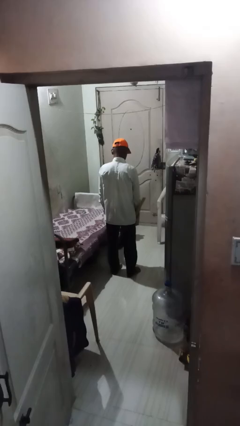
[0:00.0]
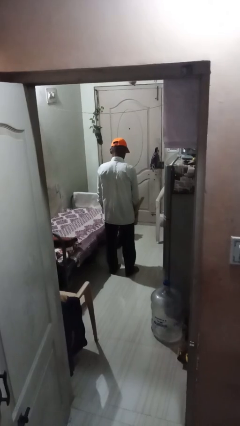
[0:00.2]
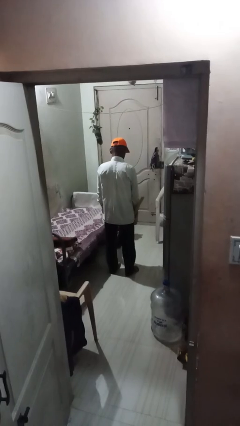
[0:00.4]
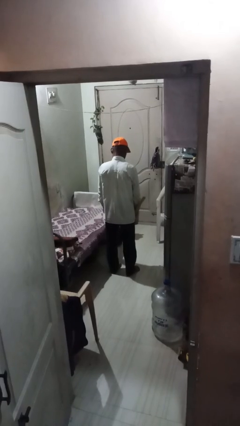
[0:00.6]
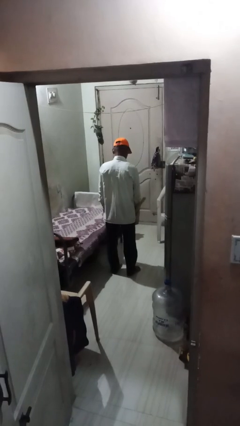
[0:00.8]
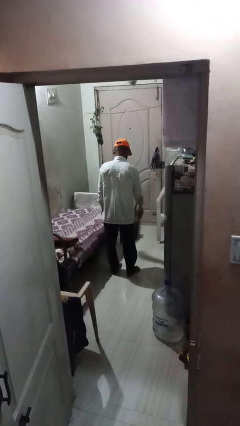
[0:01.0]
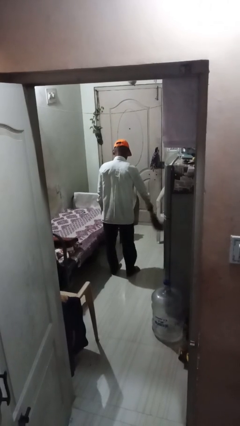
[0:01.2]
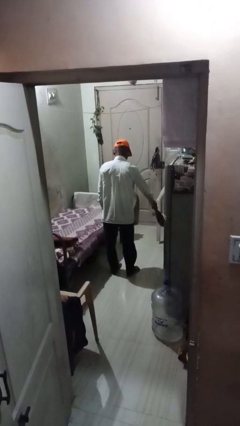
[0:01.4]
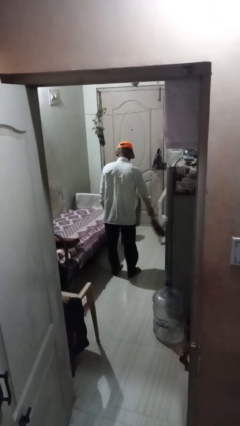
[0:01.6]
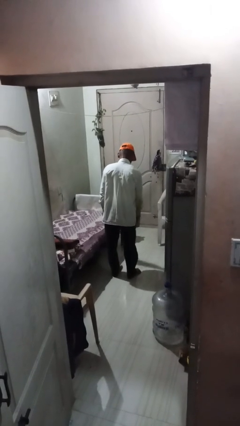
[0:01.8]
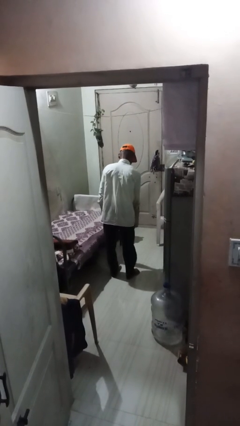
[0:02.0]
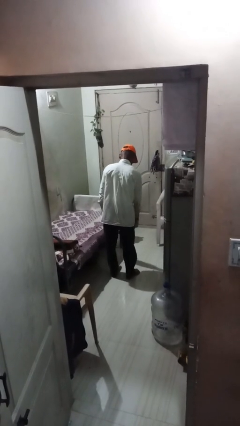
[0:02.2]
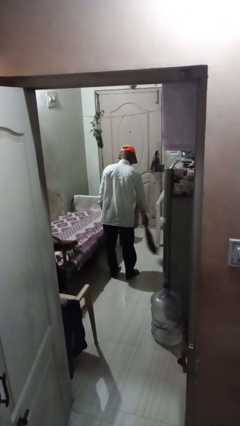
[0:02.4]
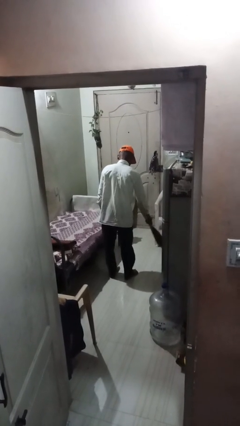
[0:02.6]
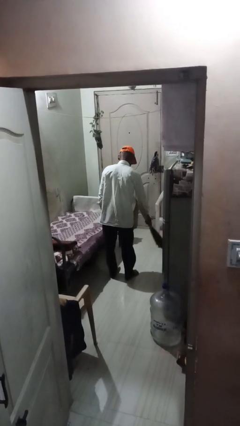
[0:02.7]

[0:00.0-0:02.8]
person mops

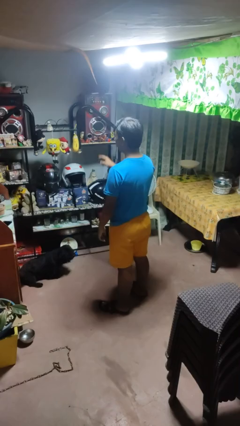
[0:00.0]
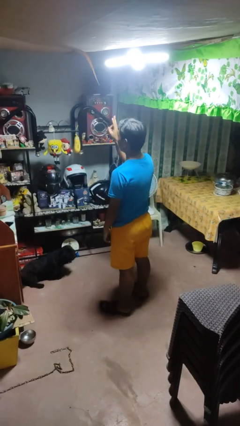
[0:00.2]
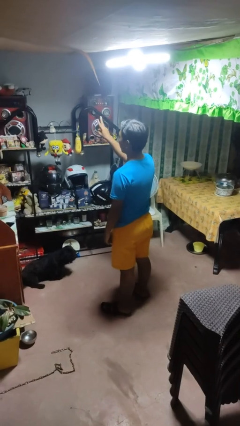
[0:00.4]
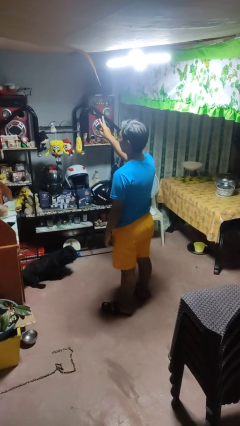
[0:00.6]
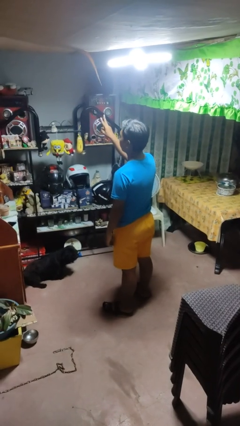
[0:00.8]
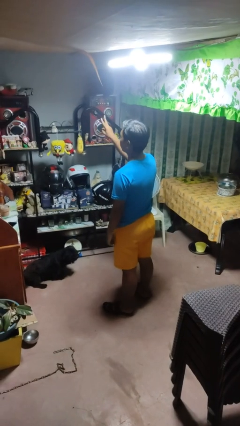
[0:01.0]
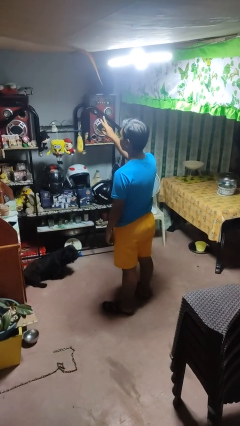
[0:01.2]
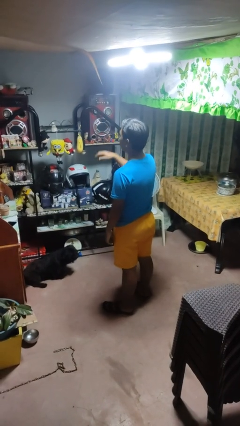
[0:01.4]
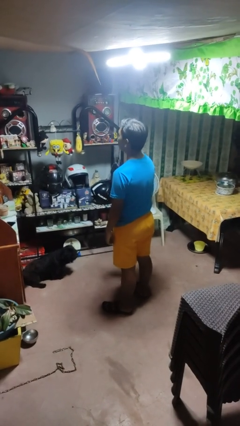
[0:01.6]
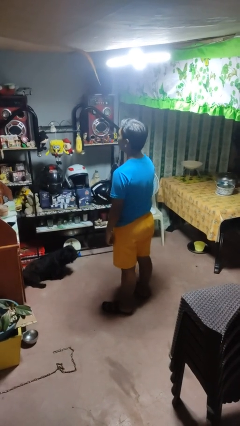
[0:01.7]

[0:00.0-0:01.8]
person gestures peace

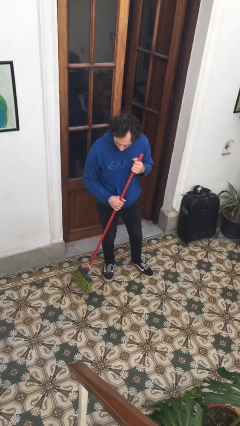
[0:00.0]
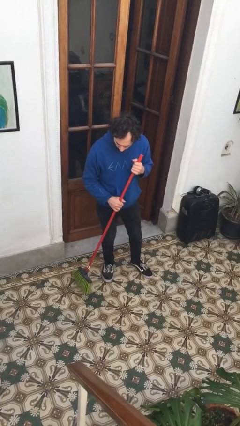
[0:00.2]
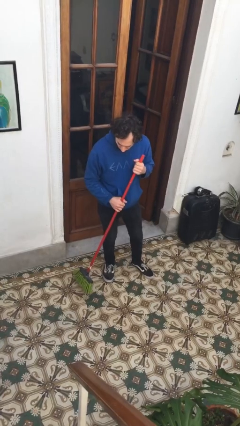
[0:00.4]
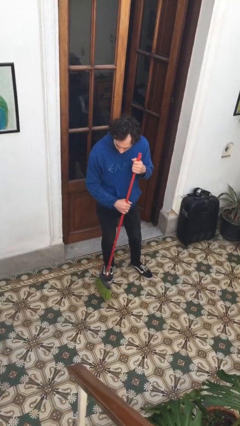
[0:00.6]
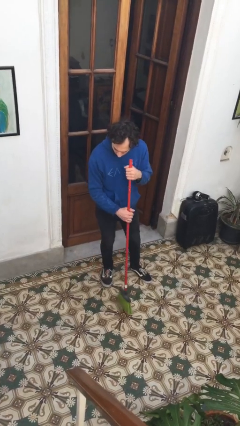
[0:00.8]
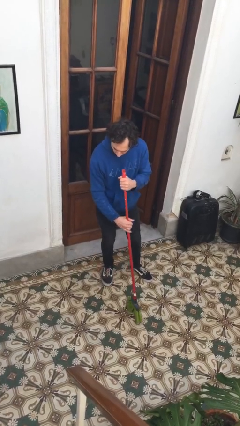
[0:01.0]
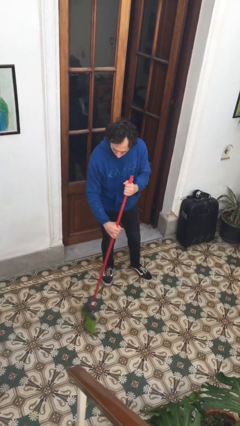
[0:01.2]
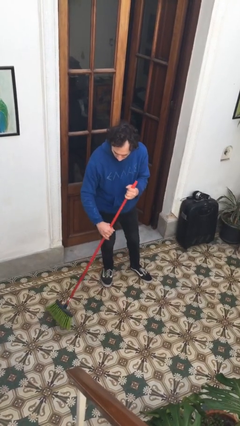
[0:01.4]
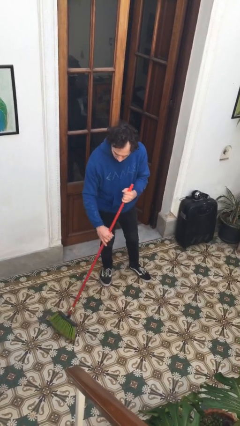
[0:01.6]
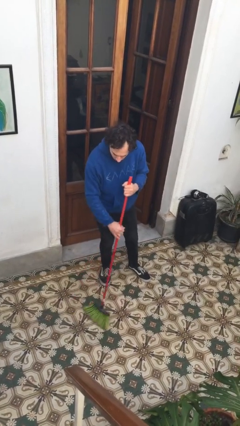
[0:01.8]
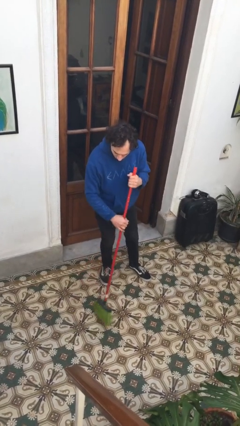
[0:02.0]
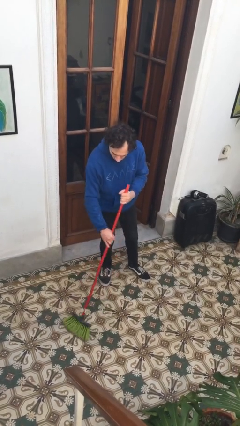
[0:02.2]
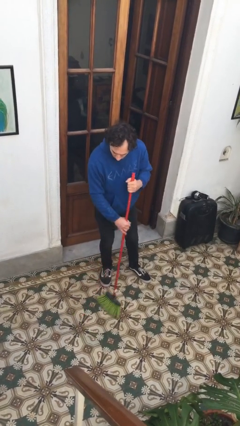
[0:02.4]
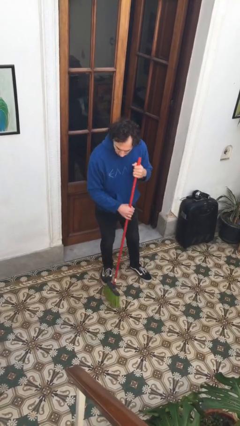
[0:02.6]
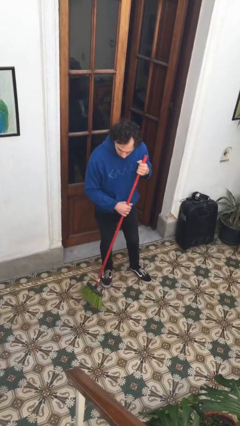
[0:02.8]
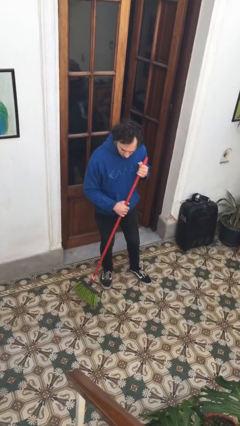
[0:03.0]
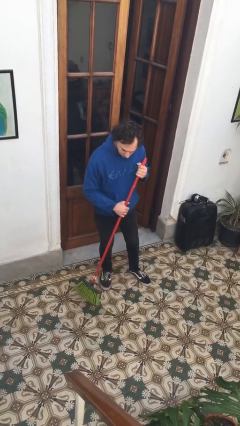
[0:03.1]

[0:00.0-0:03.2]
person sweeps floor

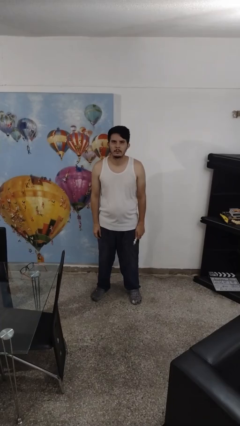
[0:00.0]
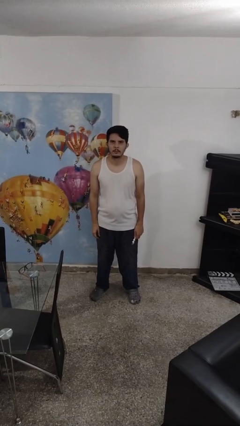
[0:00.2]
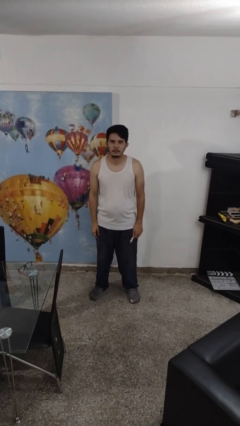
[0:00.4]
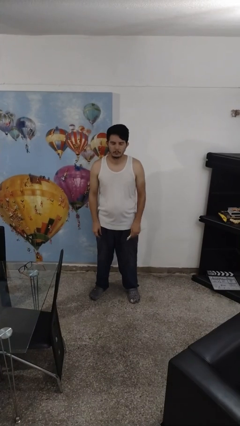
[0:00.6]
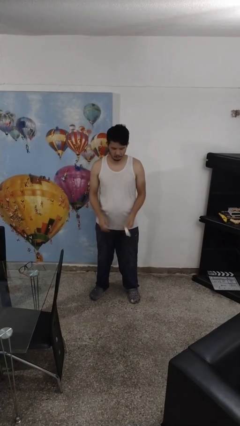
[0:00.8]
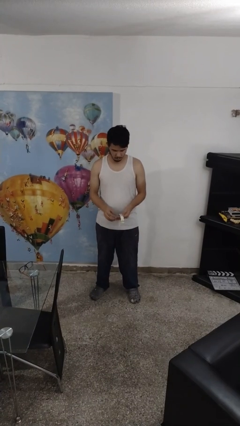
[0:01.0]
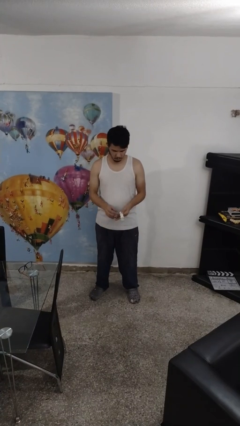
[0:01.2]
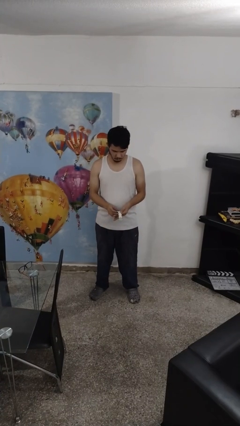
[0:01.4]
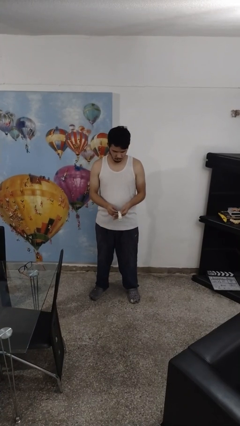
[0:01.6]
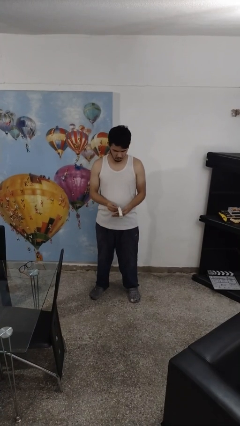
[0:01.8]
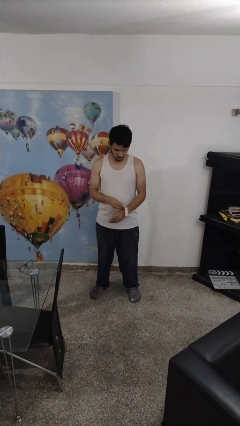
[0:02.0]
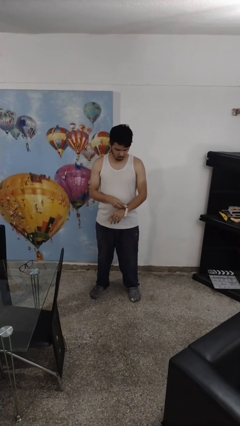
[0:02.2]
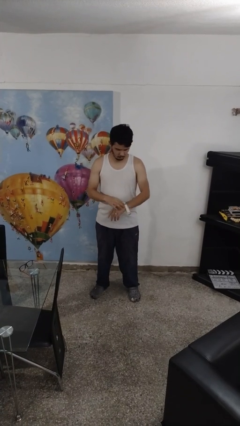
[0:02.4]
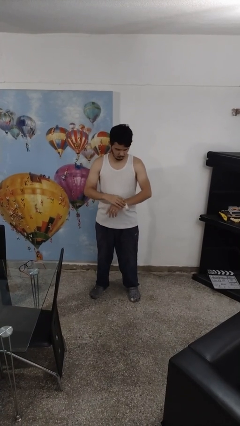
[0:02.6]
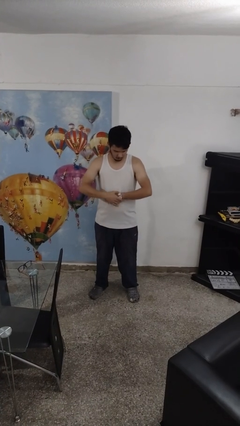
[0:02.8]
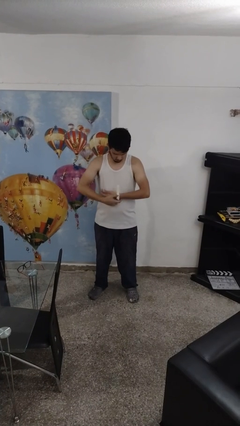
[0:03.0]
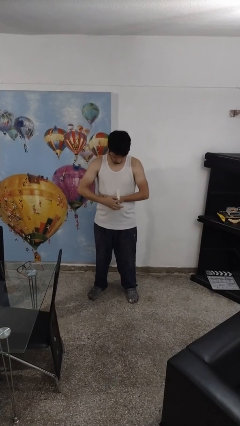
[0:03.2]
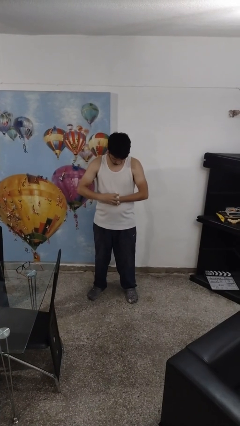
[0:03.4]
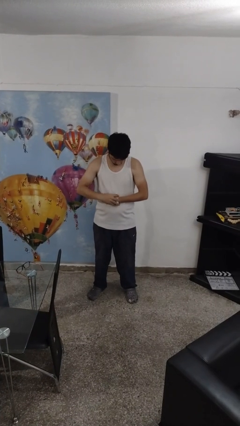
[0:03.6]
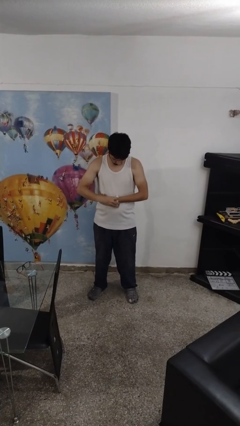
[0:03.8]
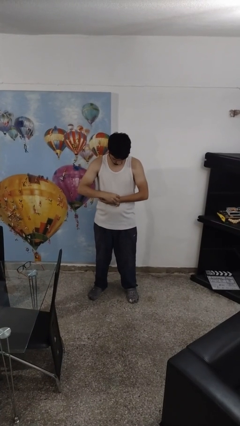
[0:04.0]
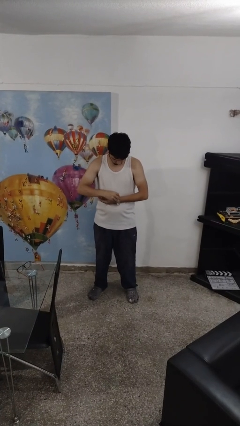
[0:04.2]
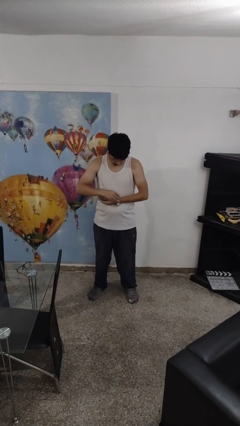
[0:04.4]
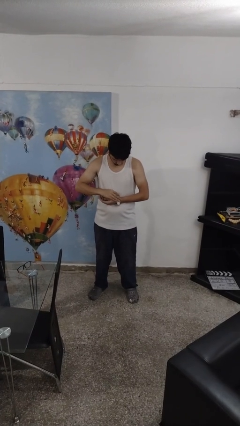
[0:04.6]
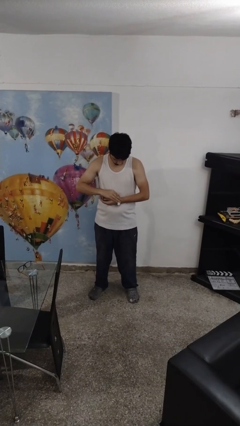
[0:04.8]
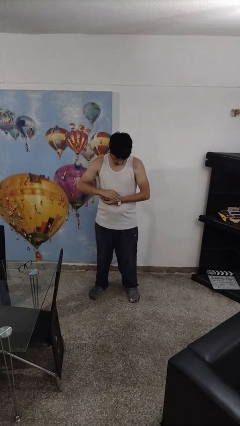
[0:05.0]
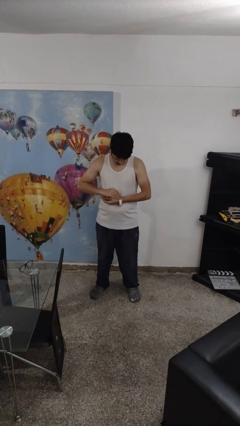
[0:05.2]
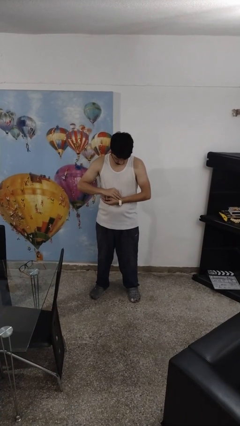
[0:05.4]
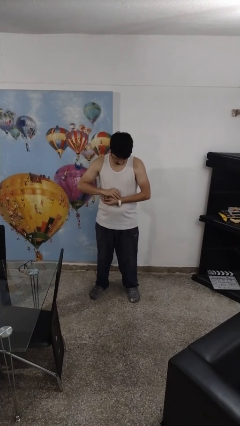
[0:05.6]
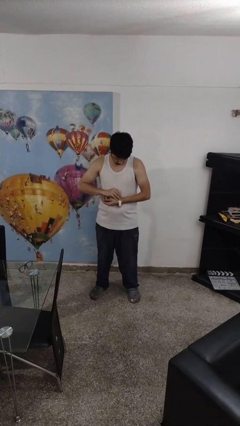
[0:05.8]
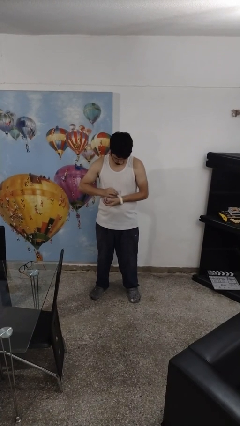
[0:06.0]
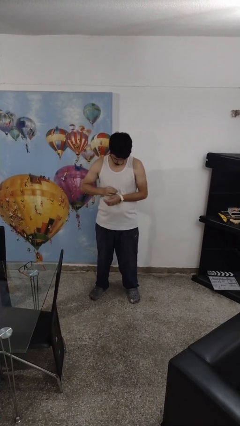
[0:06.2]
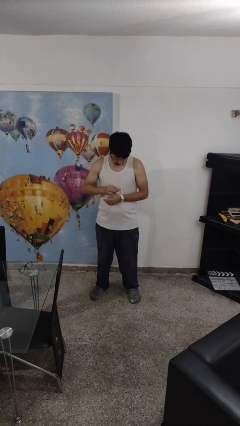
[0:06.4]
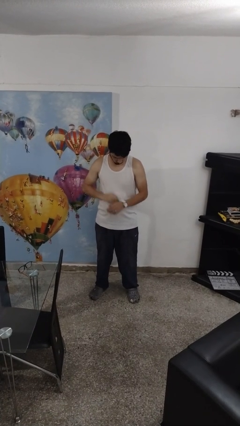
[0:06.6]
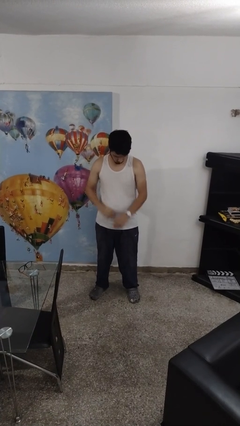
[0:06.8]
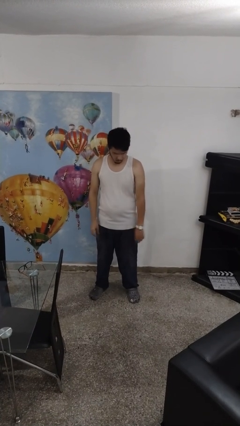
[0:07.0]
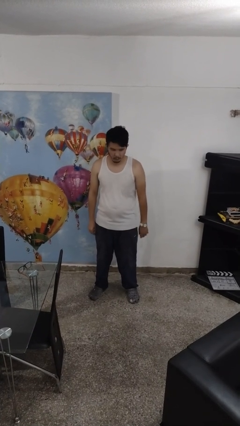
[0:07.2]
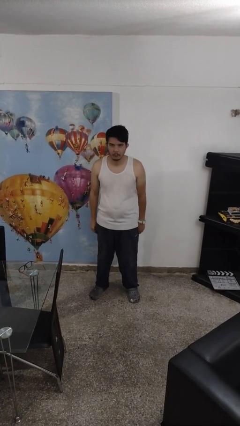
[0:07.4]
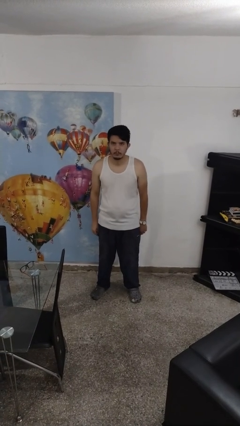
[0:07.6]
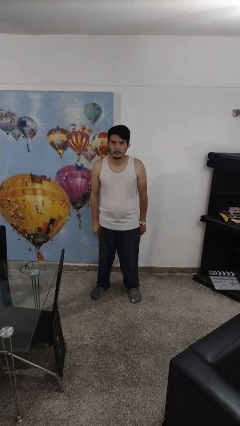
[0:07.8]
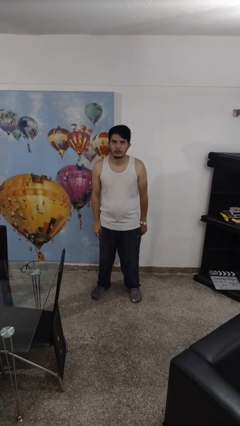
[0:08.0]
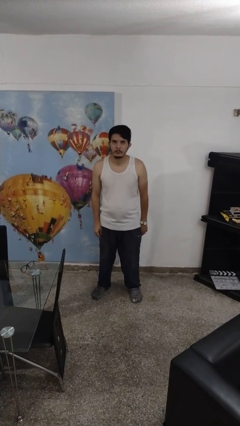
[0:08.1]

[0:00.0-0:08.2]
person puts on wristwatch

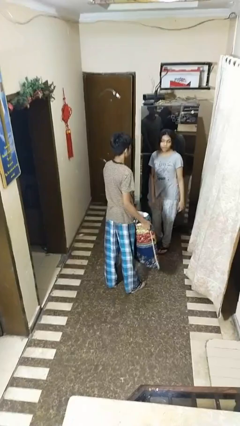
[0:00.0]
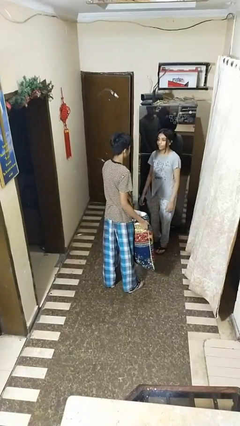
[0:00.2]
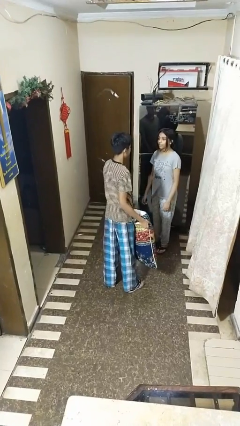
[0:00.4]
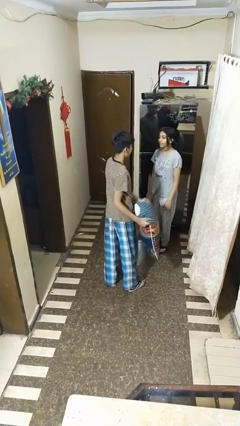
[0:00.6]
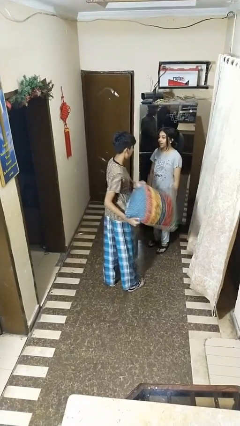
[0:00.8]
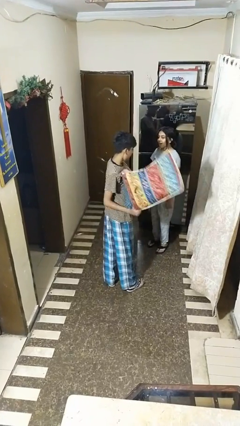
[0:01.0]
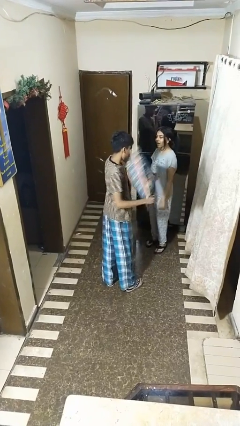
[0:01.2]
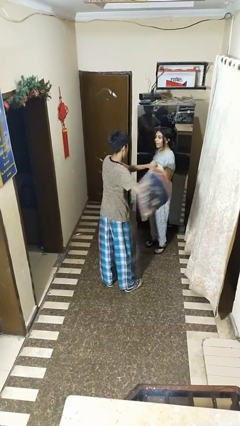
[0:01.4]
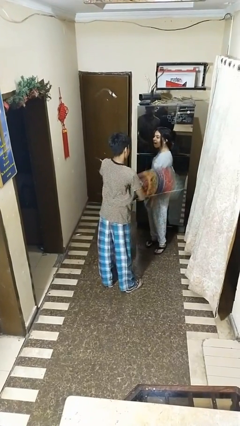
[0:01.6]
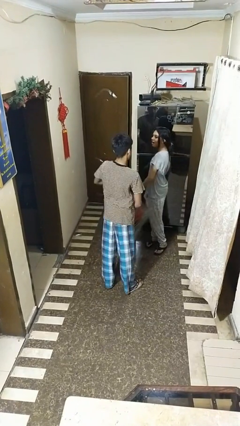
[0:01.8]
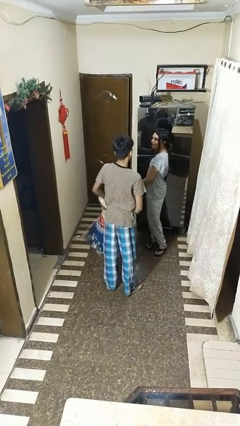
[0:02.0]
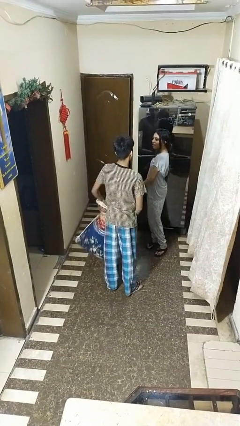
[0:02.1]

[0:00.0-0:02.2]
person hits person with pillow
